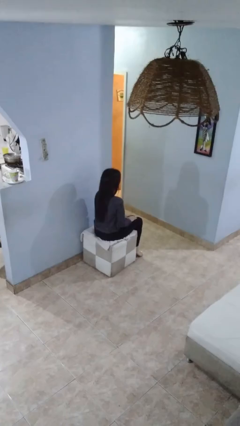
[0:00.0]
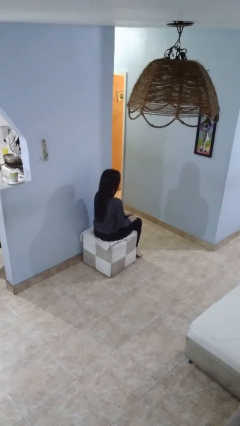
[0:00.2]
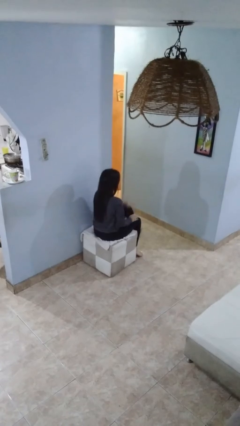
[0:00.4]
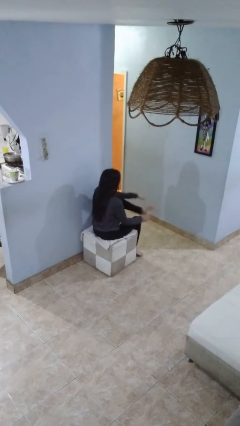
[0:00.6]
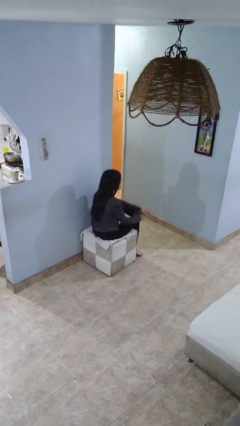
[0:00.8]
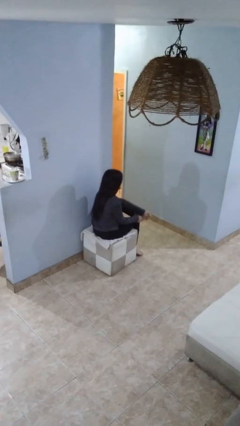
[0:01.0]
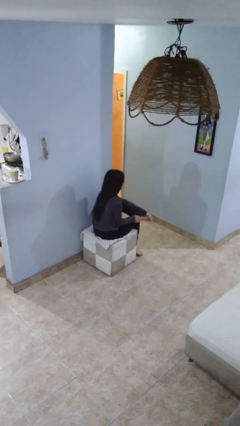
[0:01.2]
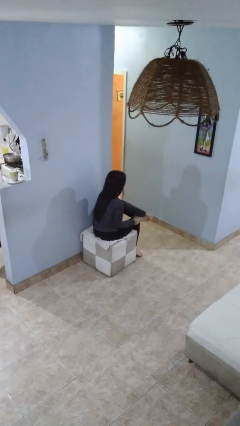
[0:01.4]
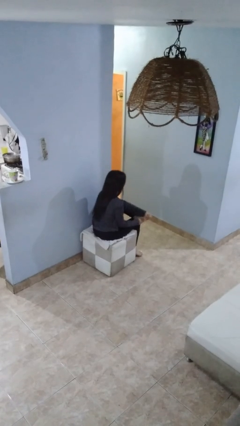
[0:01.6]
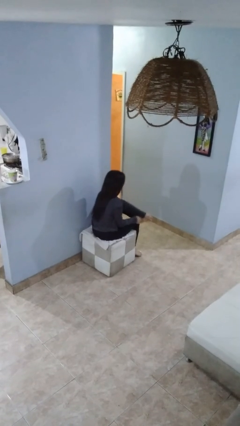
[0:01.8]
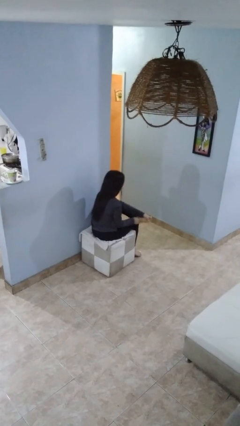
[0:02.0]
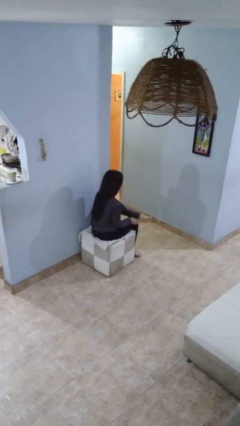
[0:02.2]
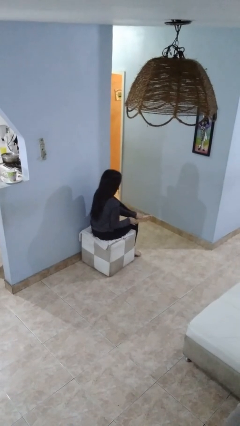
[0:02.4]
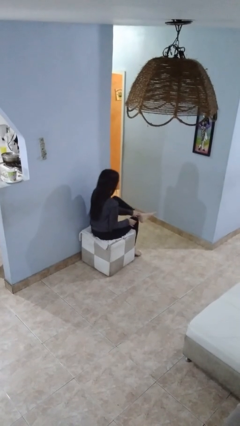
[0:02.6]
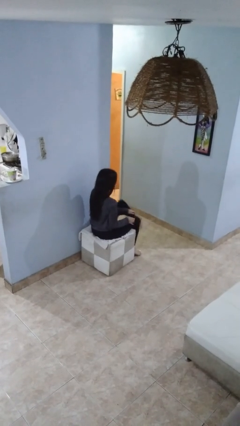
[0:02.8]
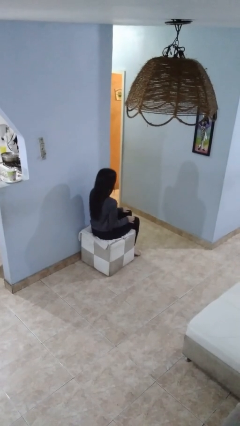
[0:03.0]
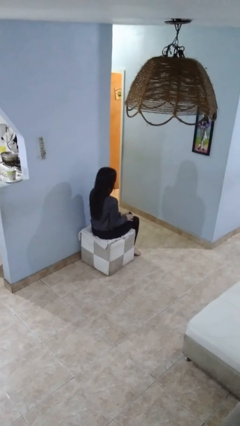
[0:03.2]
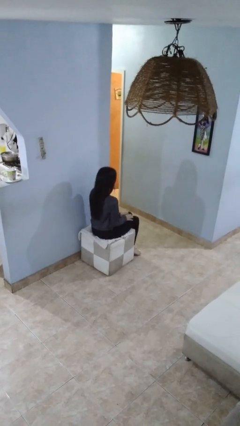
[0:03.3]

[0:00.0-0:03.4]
person rubs foot

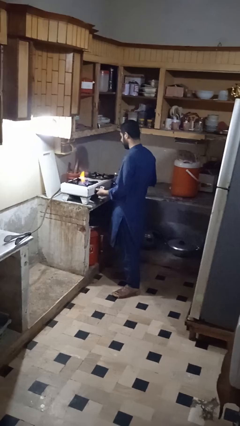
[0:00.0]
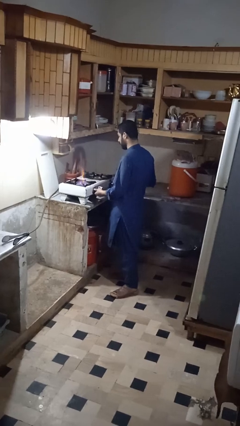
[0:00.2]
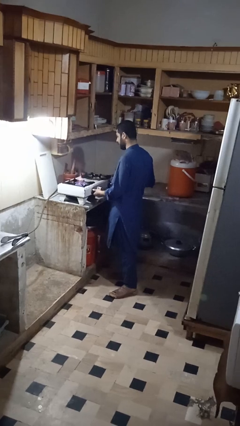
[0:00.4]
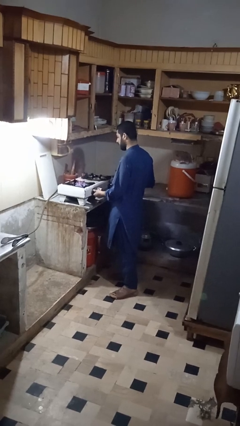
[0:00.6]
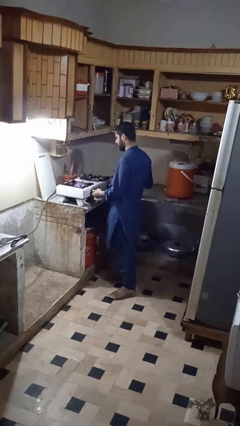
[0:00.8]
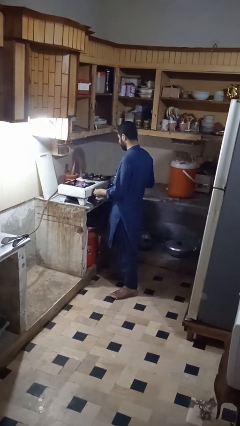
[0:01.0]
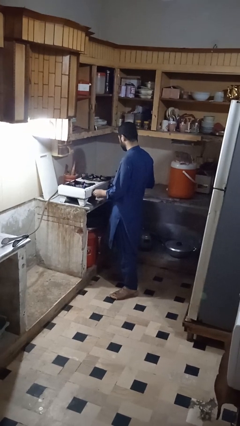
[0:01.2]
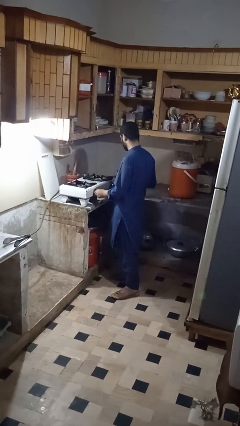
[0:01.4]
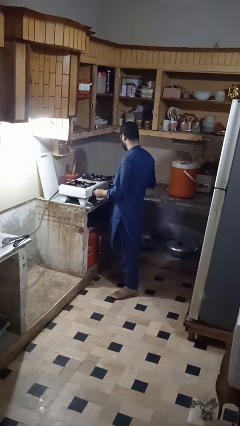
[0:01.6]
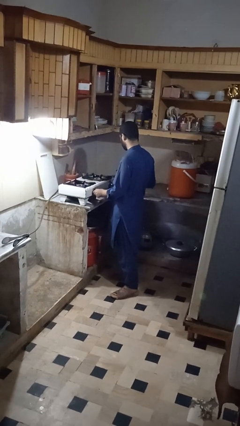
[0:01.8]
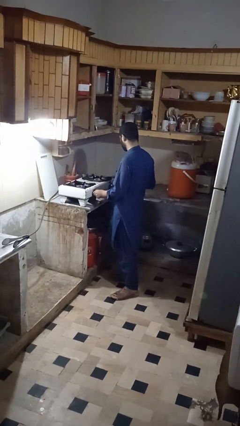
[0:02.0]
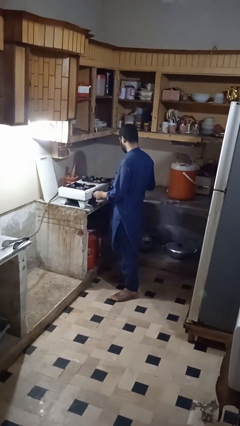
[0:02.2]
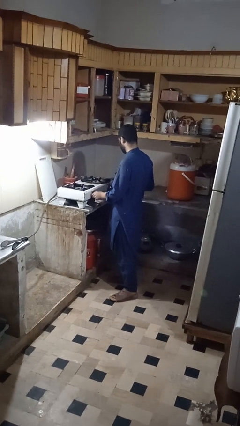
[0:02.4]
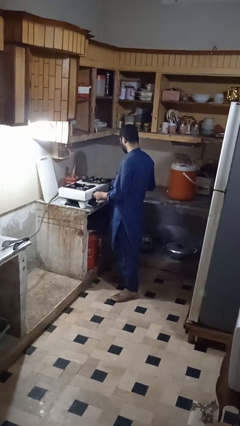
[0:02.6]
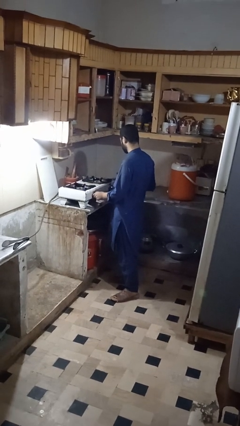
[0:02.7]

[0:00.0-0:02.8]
person turns off stovetop

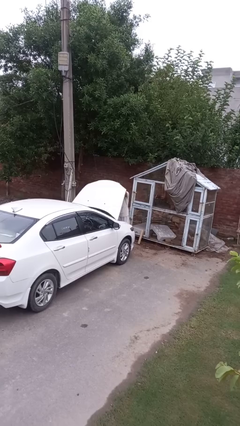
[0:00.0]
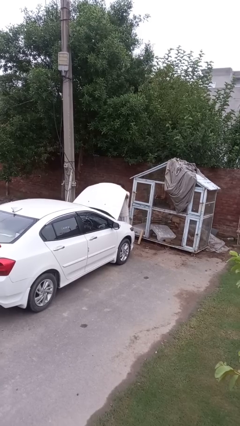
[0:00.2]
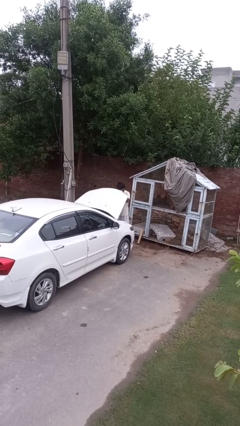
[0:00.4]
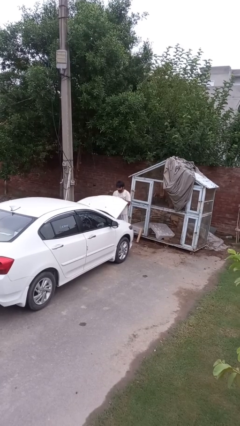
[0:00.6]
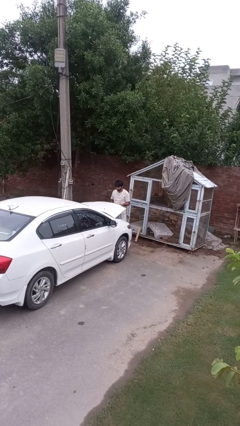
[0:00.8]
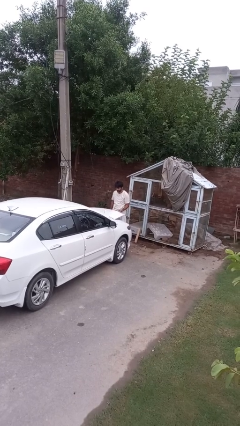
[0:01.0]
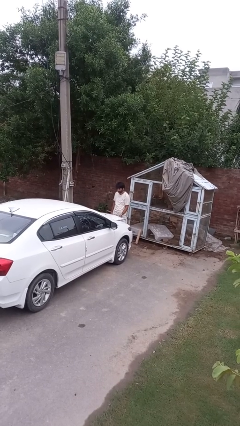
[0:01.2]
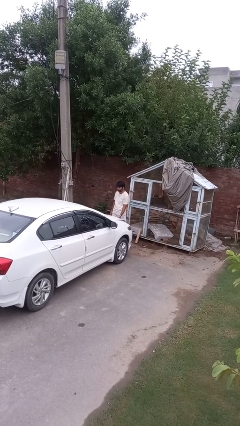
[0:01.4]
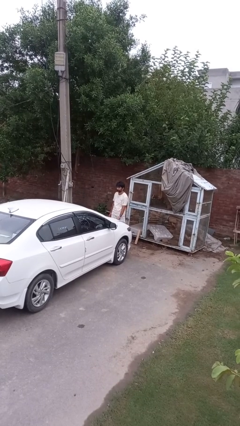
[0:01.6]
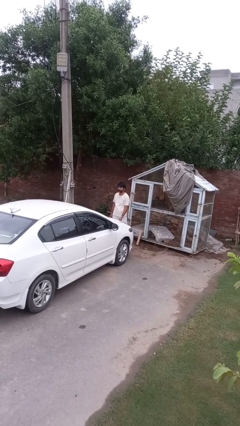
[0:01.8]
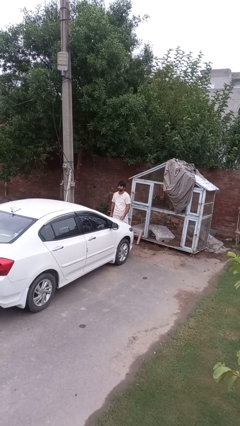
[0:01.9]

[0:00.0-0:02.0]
person closes car hood

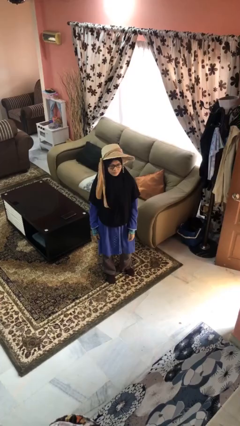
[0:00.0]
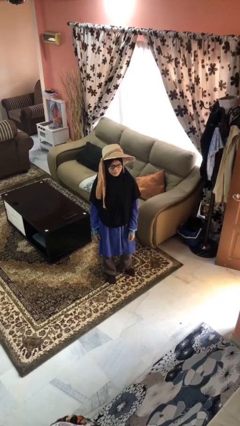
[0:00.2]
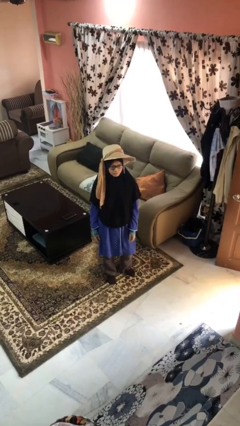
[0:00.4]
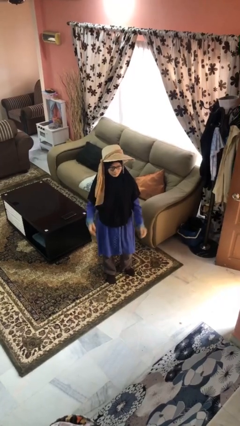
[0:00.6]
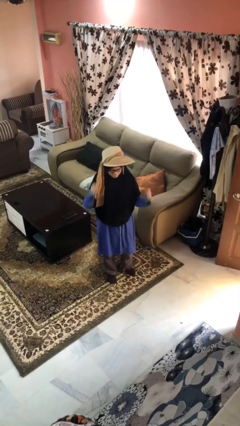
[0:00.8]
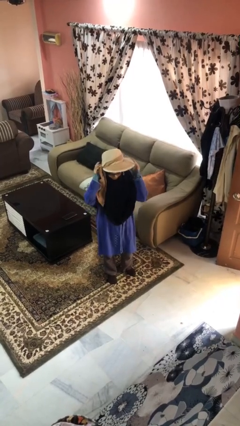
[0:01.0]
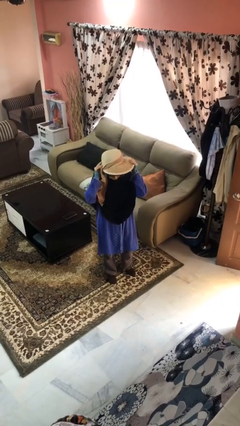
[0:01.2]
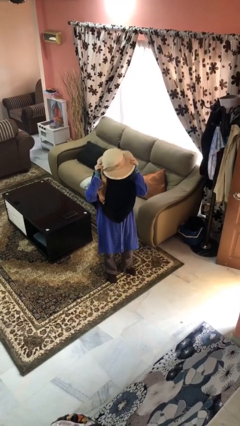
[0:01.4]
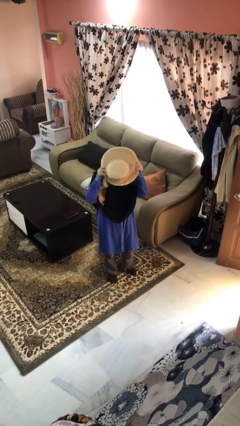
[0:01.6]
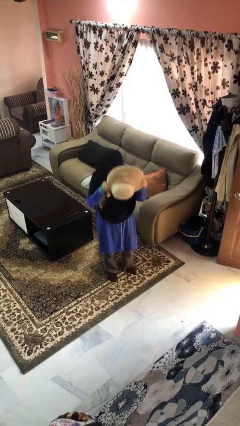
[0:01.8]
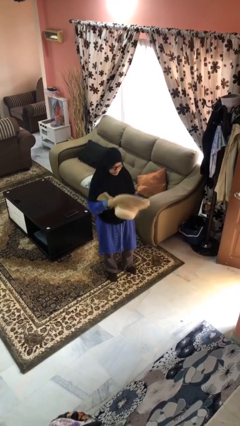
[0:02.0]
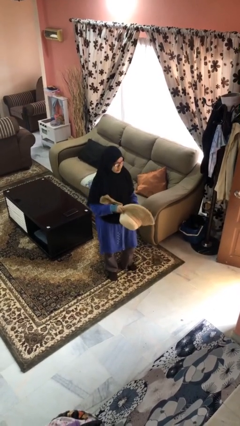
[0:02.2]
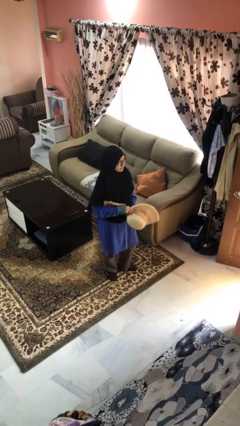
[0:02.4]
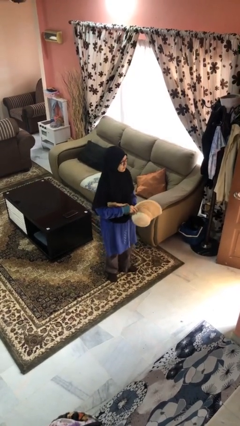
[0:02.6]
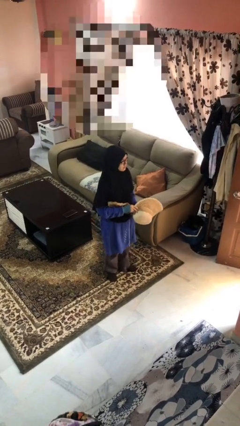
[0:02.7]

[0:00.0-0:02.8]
person takes off hat

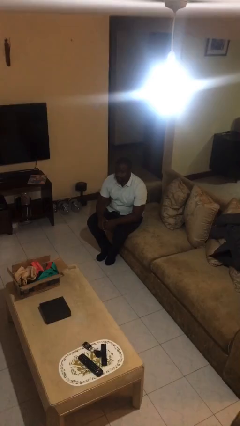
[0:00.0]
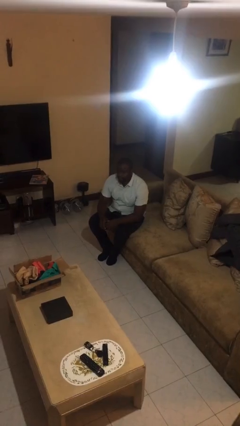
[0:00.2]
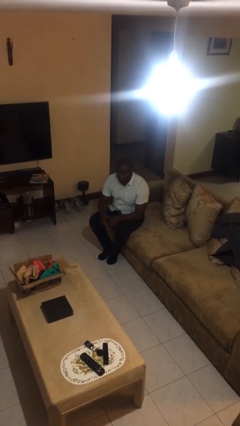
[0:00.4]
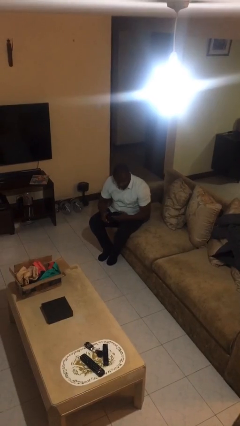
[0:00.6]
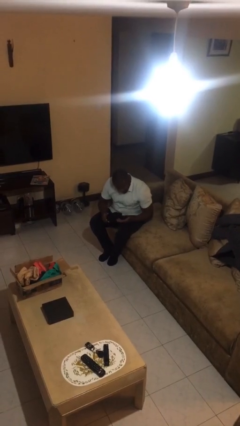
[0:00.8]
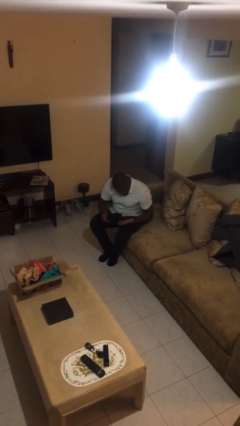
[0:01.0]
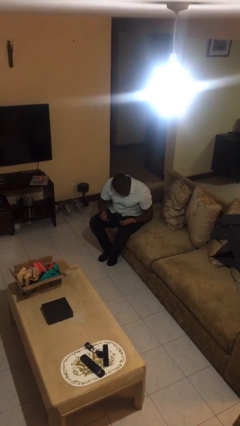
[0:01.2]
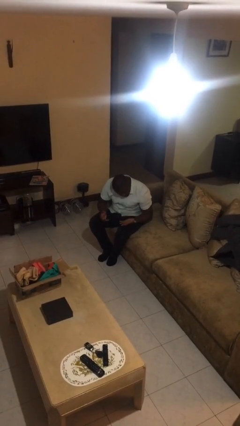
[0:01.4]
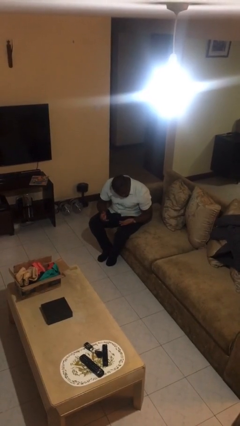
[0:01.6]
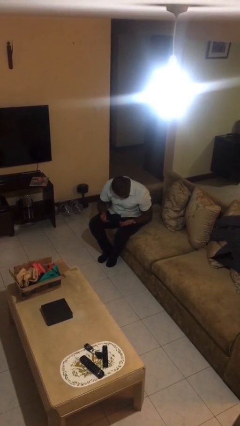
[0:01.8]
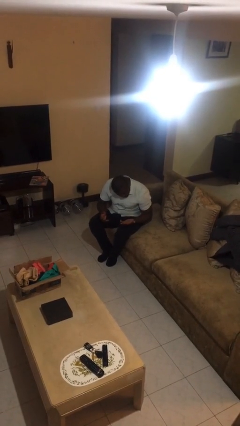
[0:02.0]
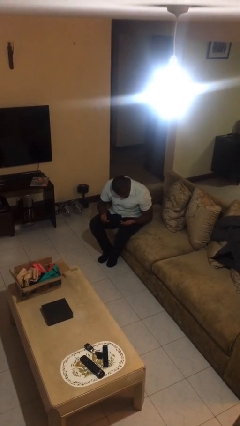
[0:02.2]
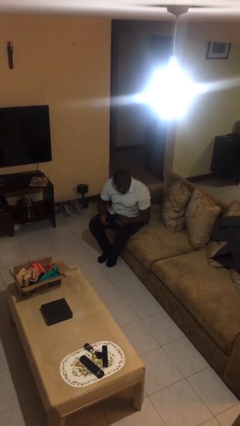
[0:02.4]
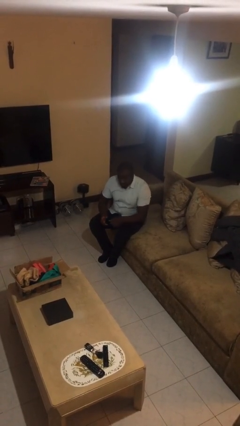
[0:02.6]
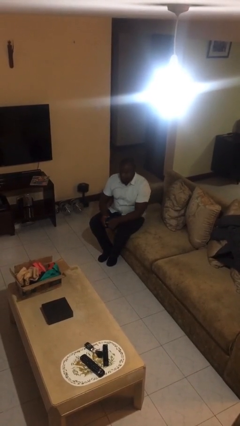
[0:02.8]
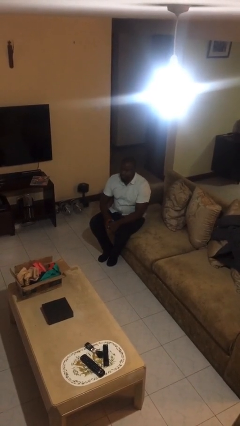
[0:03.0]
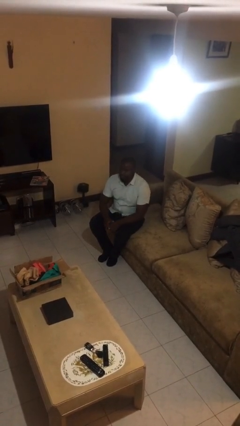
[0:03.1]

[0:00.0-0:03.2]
person looks at hands in lap

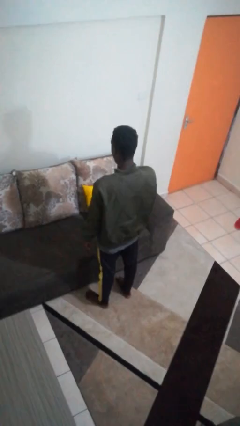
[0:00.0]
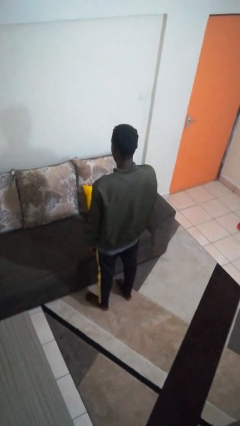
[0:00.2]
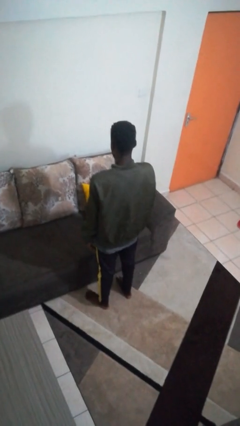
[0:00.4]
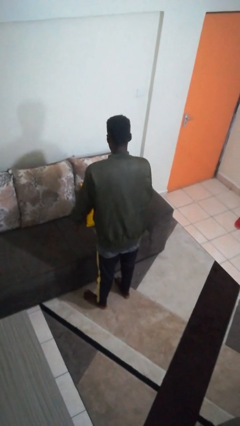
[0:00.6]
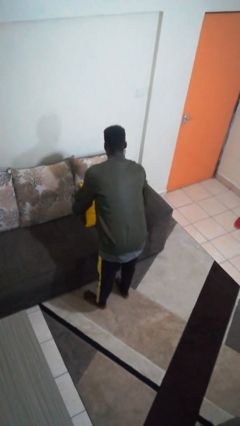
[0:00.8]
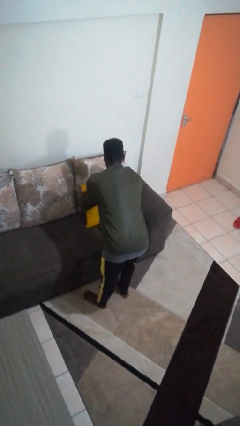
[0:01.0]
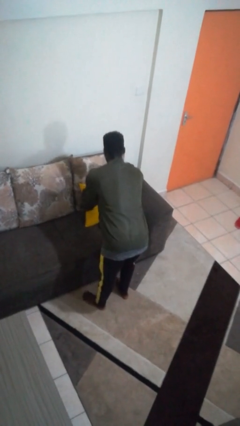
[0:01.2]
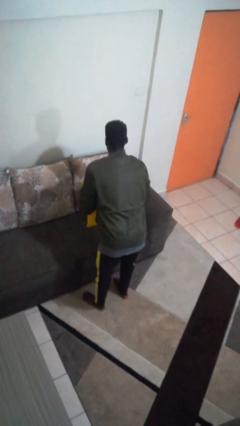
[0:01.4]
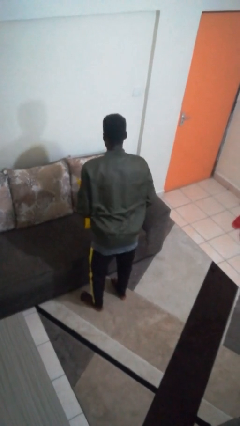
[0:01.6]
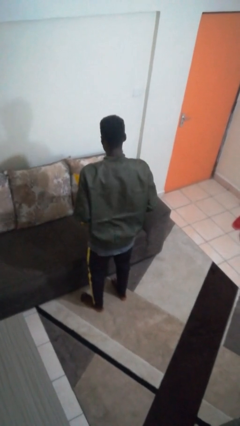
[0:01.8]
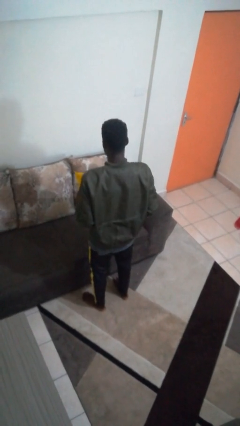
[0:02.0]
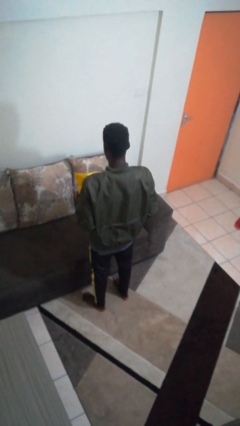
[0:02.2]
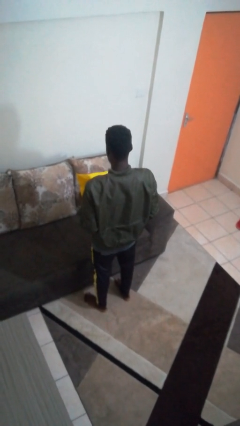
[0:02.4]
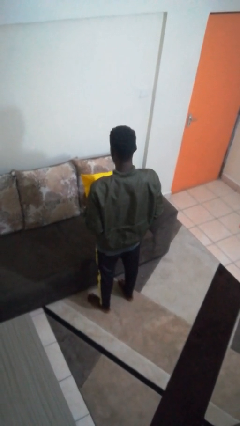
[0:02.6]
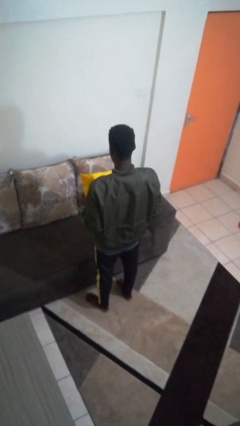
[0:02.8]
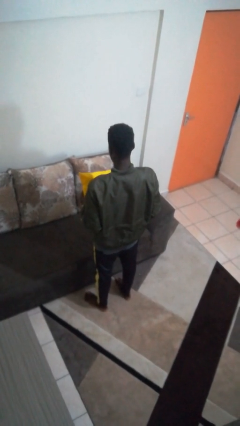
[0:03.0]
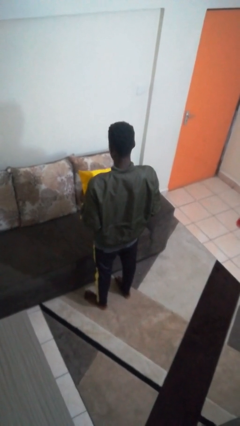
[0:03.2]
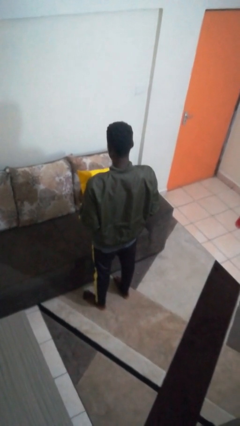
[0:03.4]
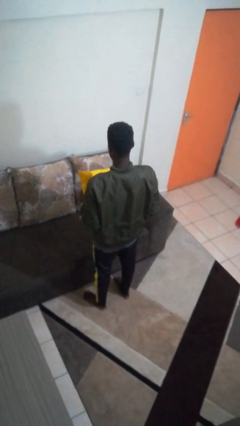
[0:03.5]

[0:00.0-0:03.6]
person picks up object from couch
